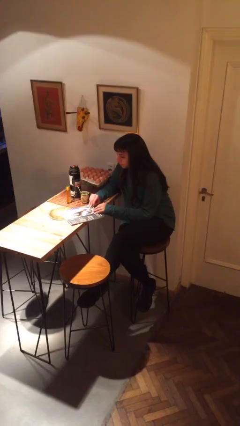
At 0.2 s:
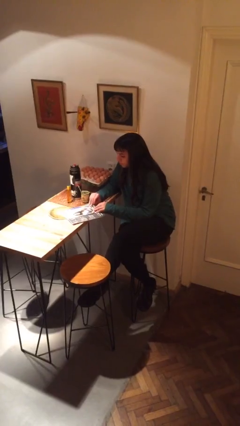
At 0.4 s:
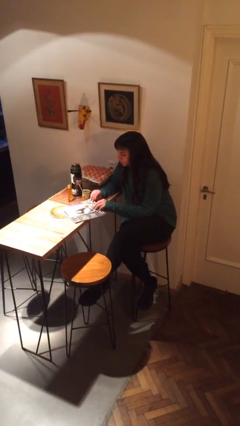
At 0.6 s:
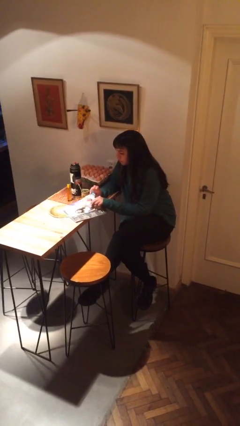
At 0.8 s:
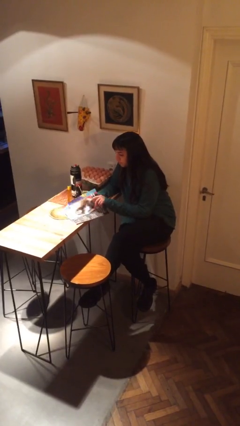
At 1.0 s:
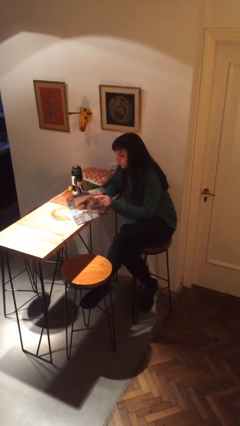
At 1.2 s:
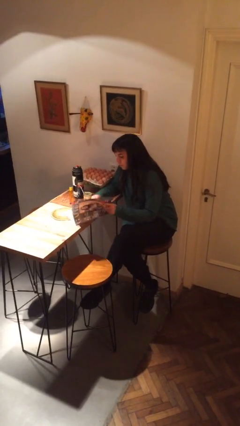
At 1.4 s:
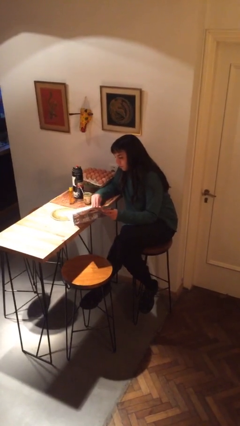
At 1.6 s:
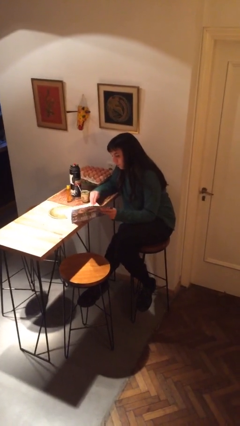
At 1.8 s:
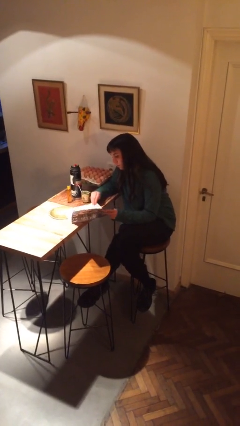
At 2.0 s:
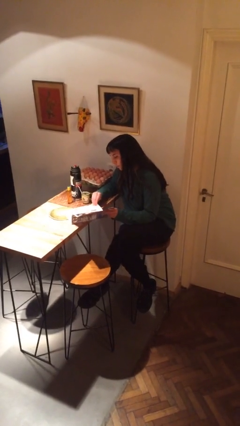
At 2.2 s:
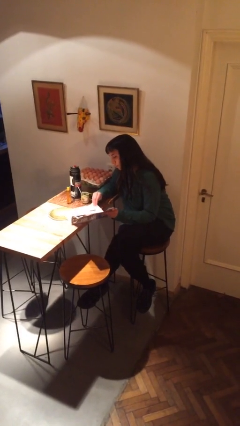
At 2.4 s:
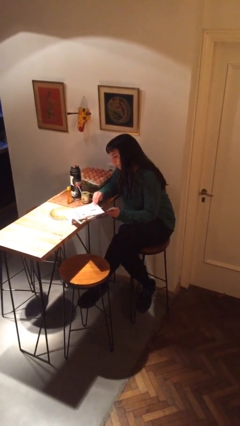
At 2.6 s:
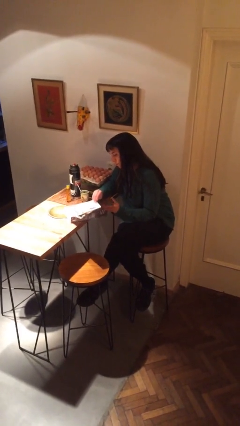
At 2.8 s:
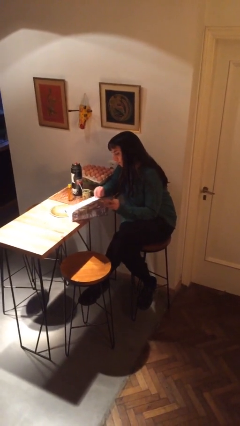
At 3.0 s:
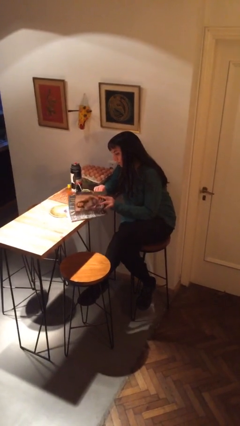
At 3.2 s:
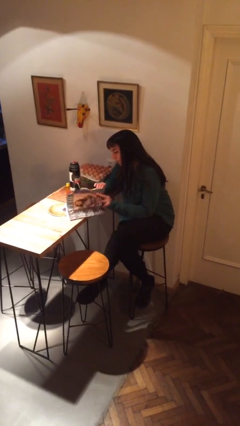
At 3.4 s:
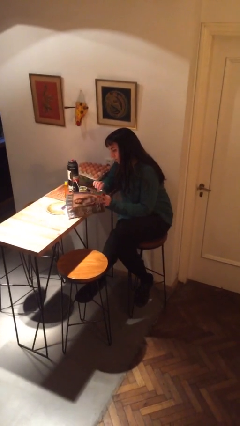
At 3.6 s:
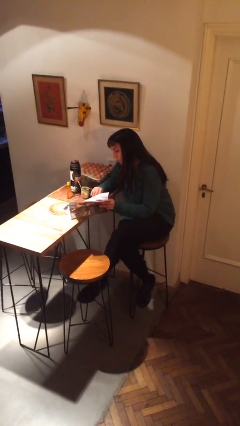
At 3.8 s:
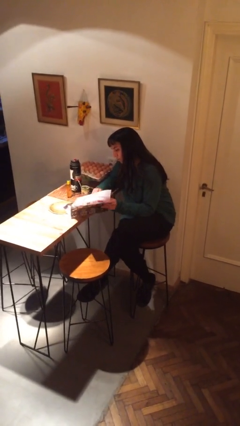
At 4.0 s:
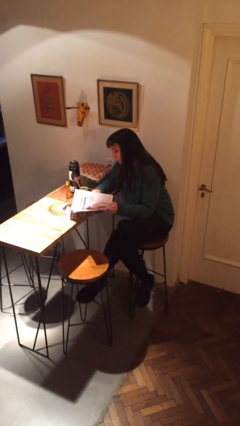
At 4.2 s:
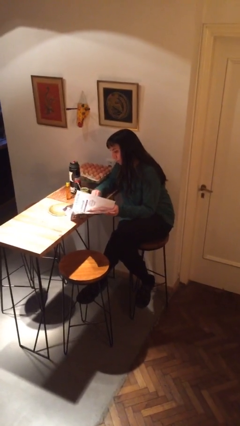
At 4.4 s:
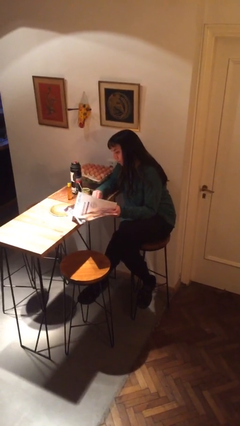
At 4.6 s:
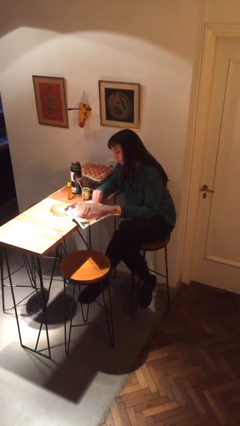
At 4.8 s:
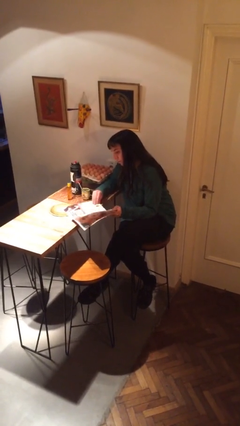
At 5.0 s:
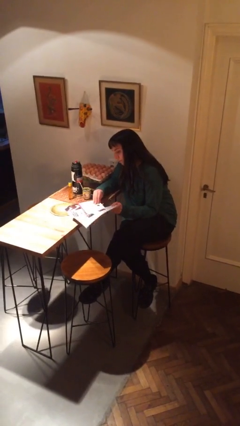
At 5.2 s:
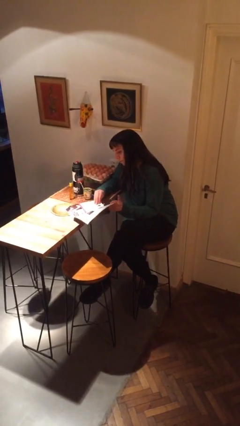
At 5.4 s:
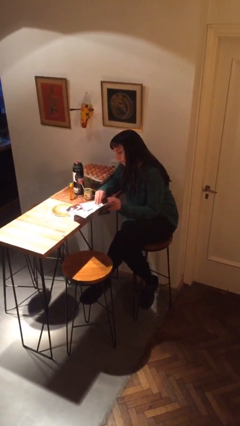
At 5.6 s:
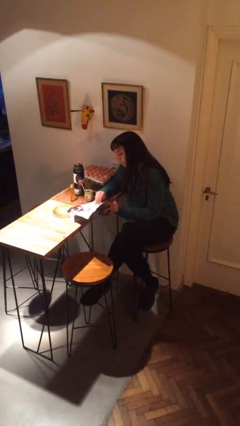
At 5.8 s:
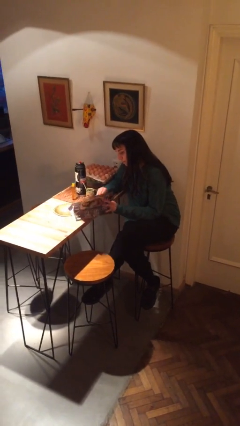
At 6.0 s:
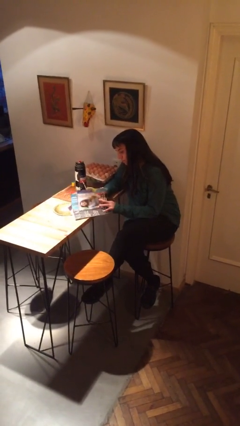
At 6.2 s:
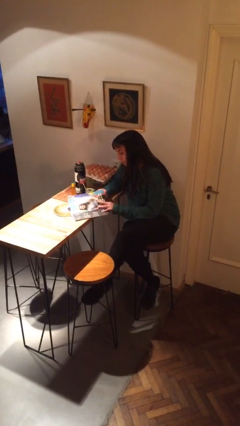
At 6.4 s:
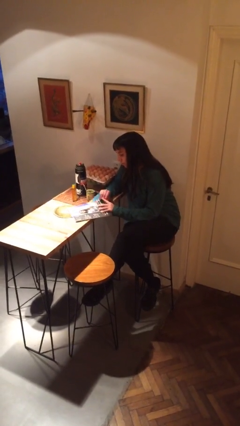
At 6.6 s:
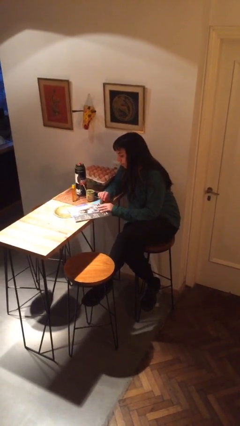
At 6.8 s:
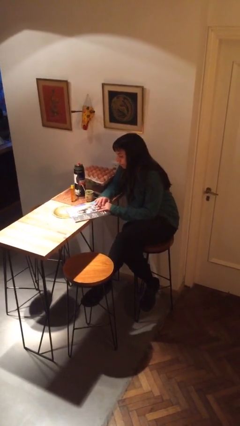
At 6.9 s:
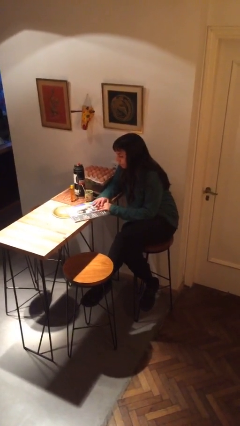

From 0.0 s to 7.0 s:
person reads magazine

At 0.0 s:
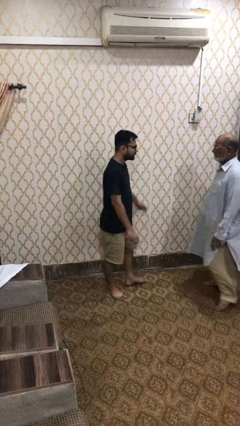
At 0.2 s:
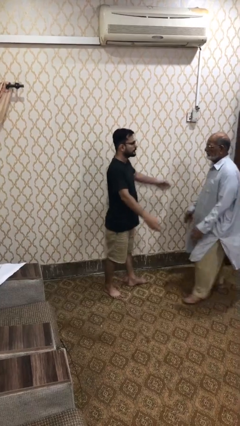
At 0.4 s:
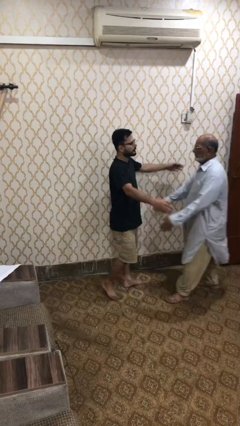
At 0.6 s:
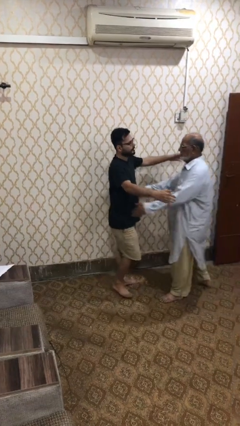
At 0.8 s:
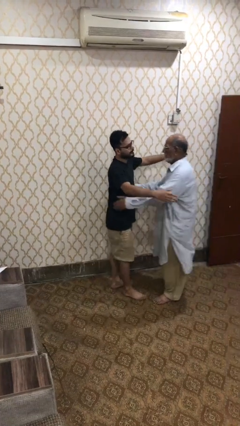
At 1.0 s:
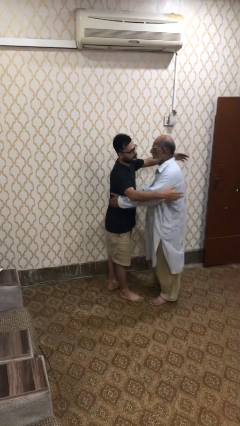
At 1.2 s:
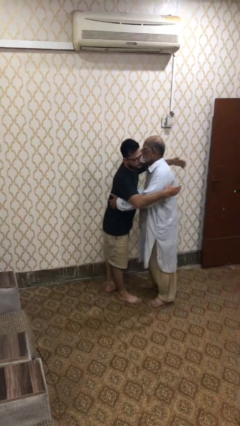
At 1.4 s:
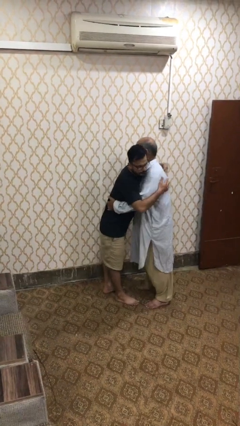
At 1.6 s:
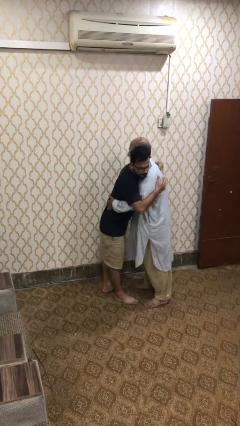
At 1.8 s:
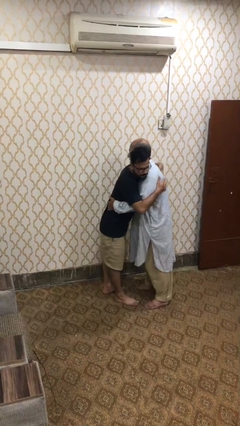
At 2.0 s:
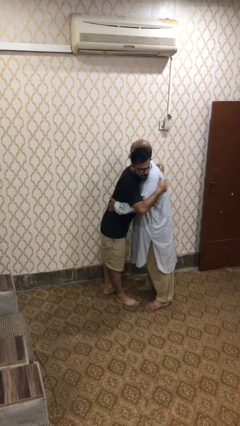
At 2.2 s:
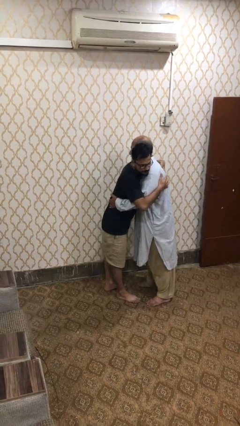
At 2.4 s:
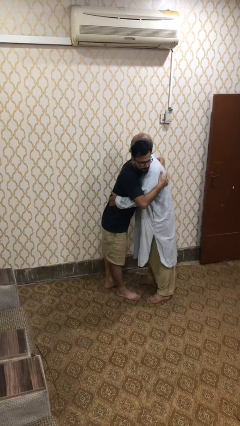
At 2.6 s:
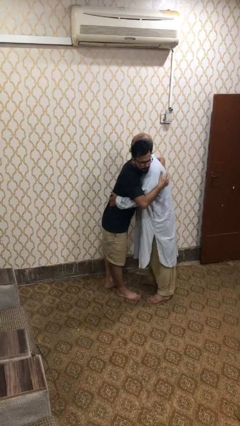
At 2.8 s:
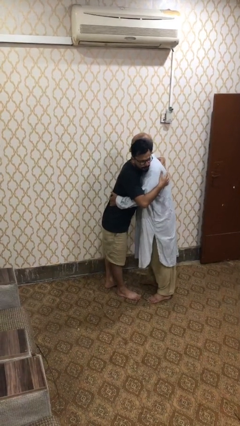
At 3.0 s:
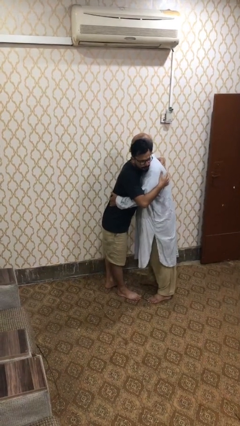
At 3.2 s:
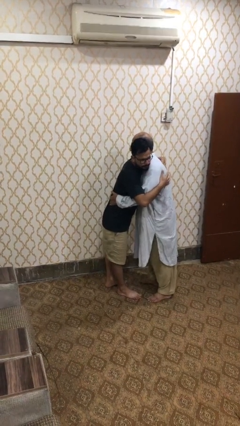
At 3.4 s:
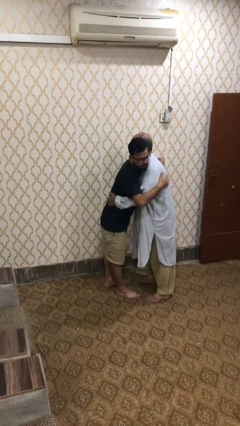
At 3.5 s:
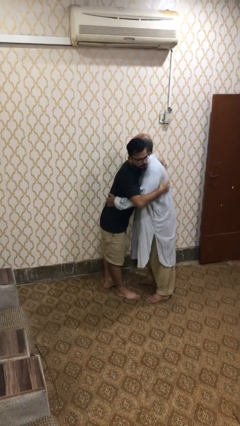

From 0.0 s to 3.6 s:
person embraces person

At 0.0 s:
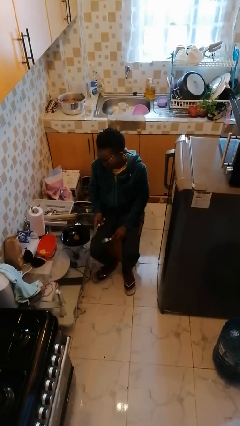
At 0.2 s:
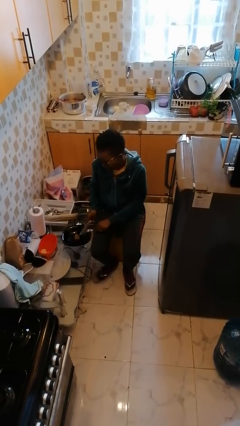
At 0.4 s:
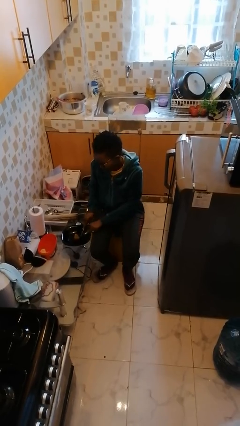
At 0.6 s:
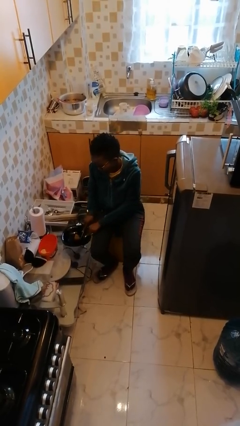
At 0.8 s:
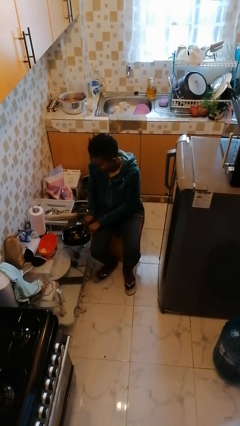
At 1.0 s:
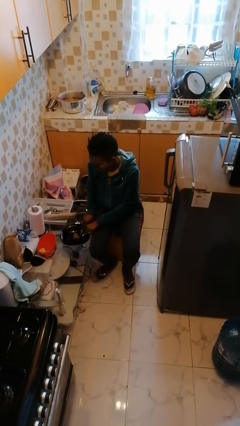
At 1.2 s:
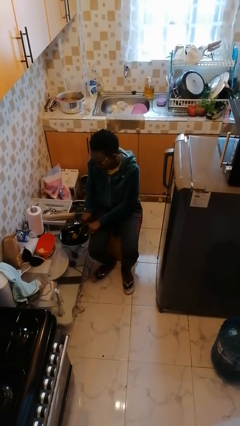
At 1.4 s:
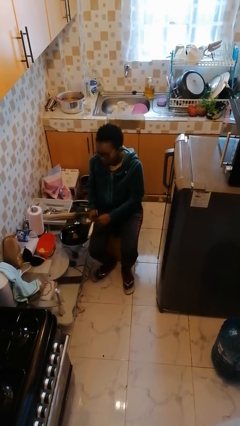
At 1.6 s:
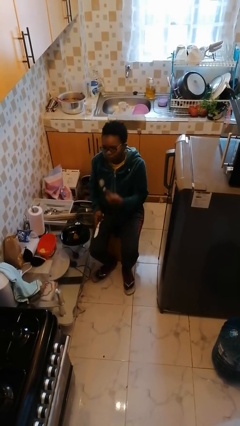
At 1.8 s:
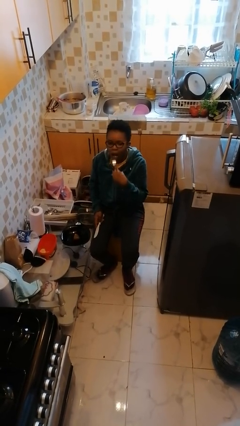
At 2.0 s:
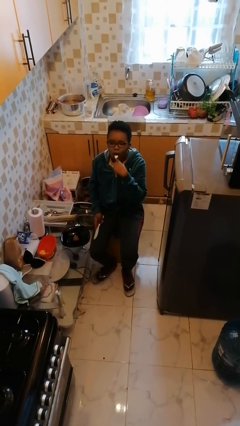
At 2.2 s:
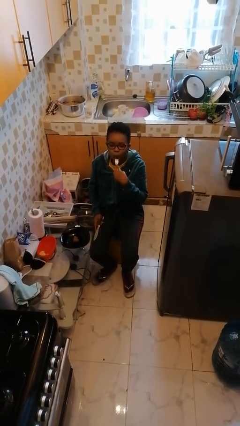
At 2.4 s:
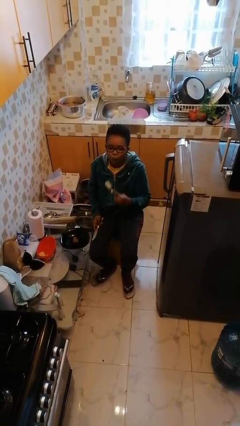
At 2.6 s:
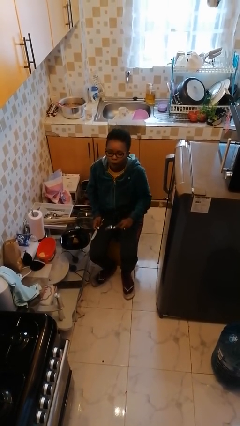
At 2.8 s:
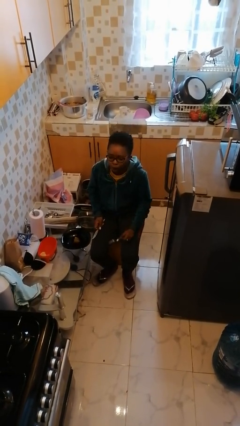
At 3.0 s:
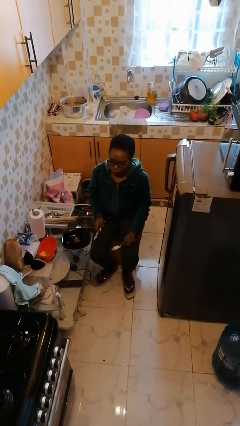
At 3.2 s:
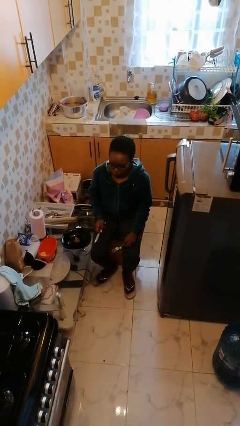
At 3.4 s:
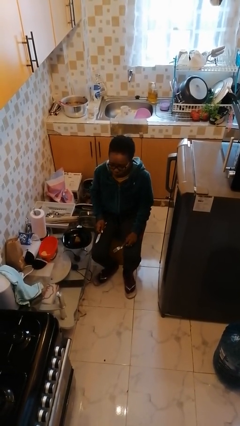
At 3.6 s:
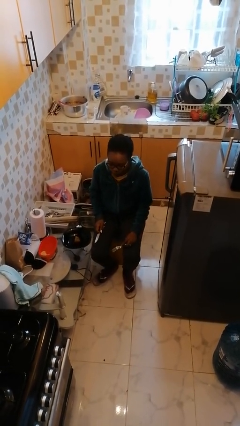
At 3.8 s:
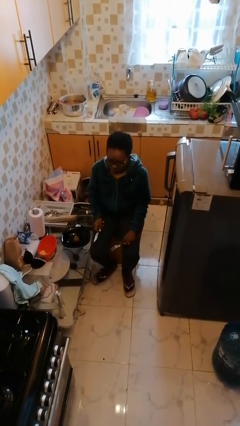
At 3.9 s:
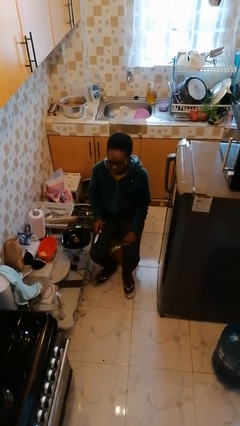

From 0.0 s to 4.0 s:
person eats with utensil

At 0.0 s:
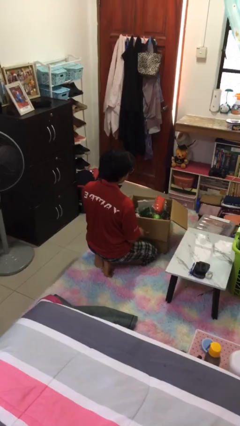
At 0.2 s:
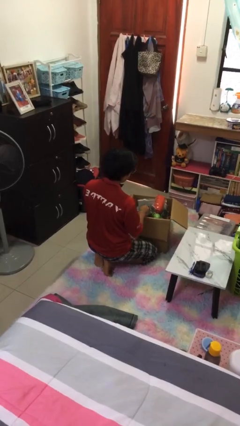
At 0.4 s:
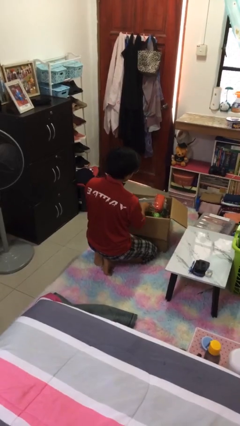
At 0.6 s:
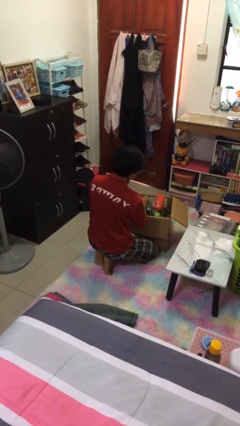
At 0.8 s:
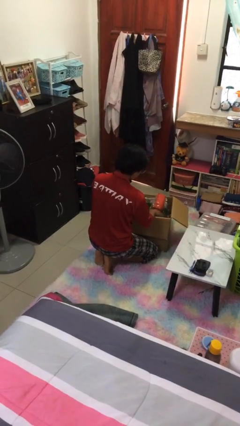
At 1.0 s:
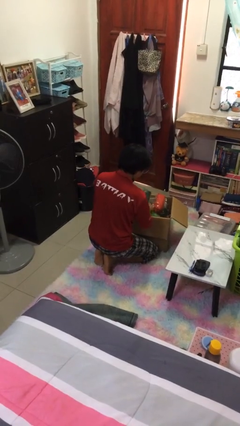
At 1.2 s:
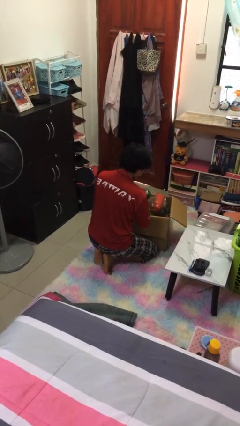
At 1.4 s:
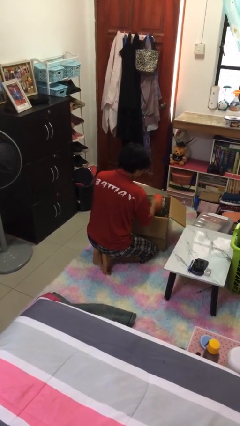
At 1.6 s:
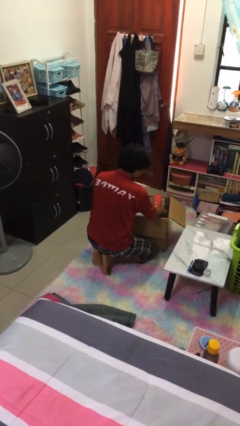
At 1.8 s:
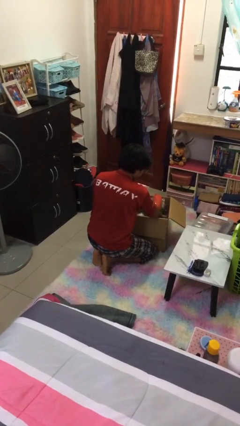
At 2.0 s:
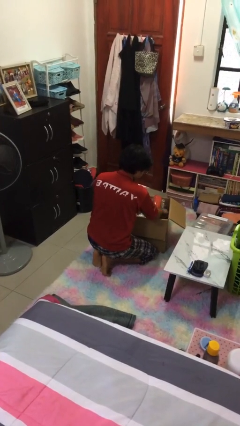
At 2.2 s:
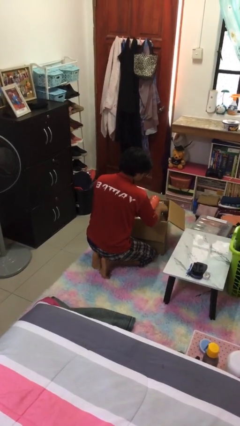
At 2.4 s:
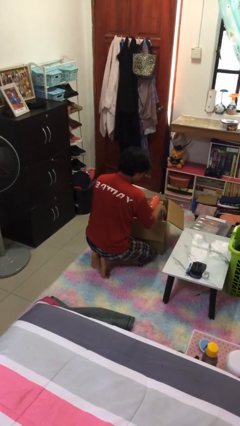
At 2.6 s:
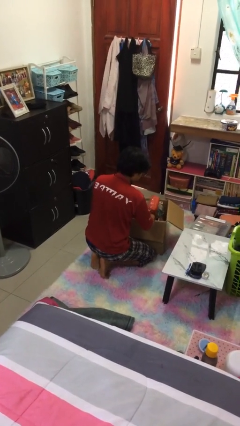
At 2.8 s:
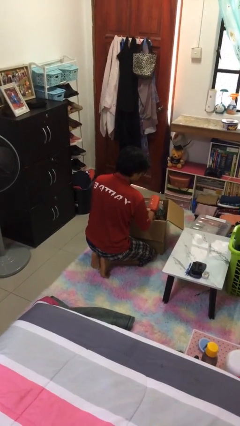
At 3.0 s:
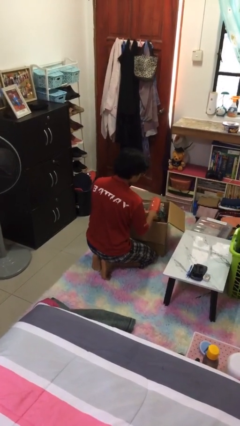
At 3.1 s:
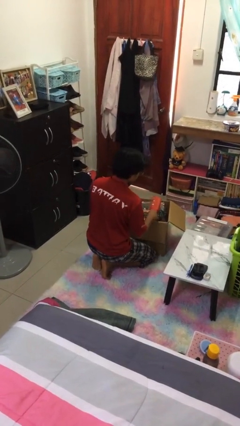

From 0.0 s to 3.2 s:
person searches in box
